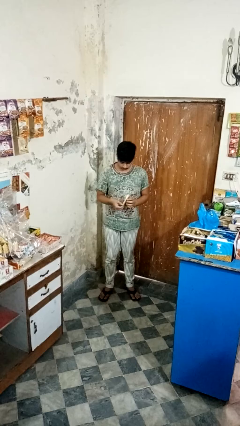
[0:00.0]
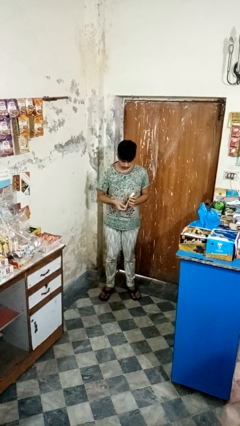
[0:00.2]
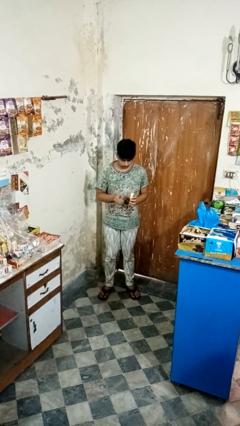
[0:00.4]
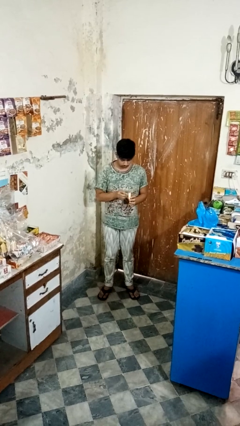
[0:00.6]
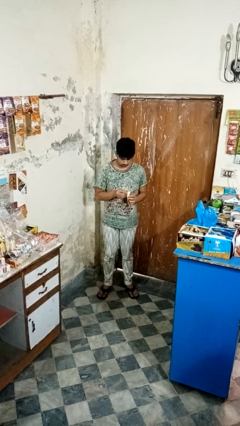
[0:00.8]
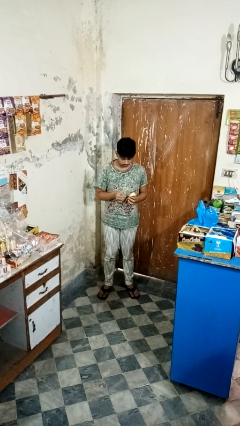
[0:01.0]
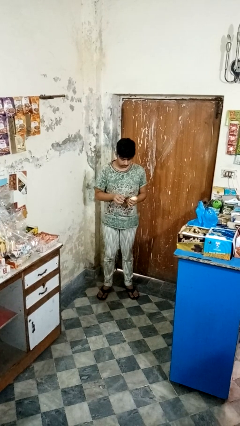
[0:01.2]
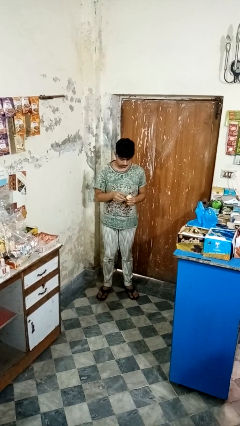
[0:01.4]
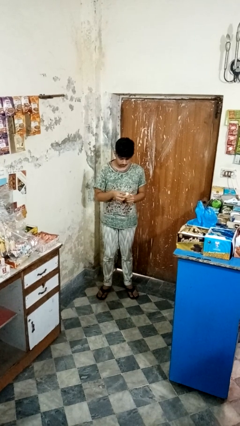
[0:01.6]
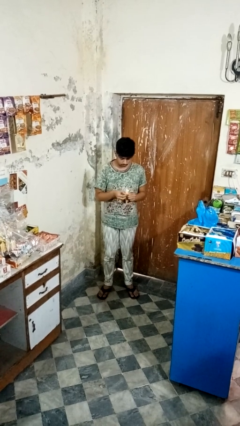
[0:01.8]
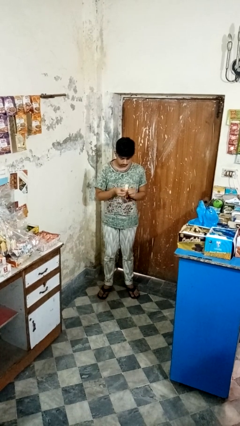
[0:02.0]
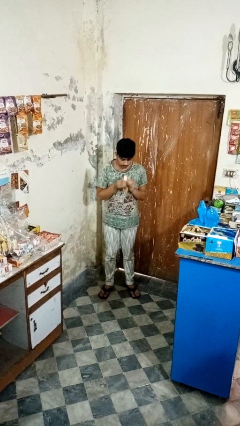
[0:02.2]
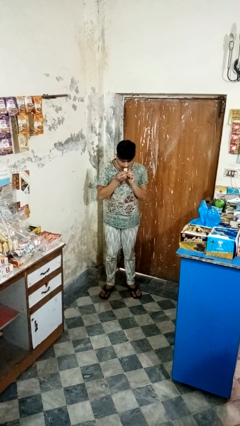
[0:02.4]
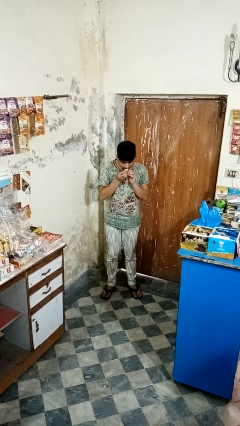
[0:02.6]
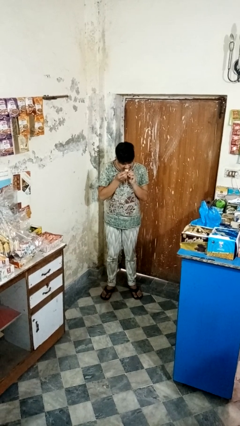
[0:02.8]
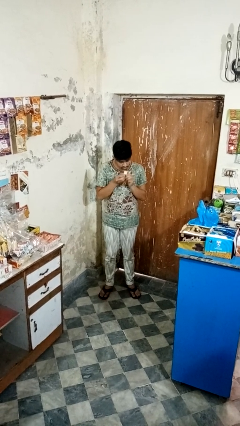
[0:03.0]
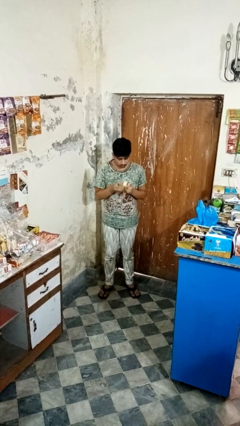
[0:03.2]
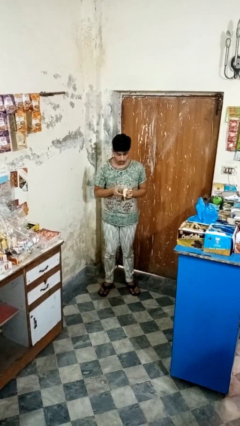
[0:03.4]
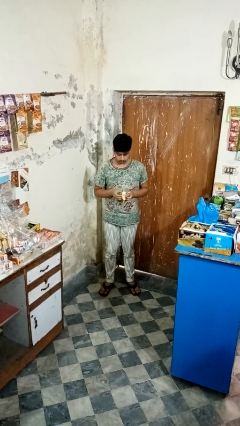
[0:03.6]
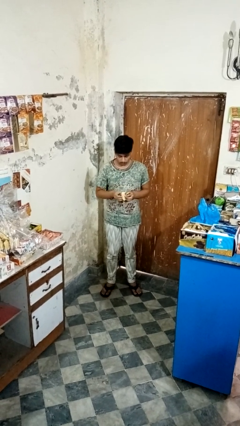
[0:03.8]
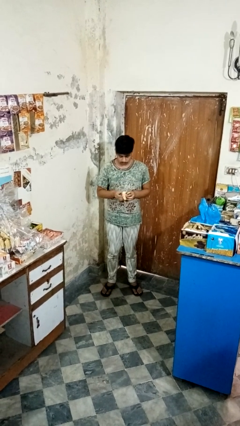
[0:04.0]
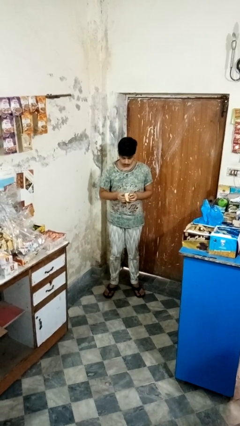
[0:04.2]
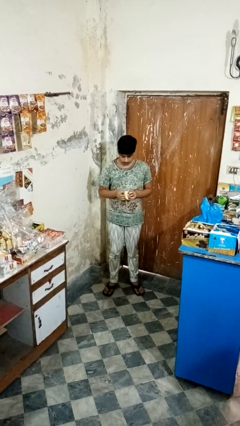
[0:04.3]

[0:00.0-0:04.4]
person eats banana

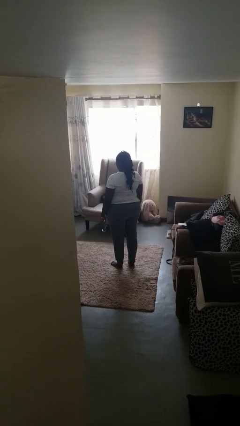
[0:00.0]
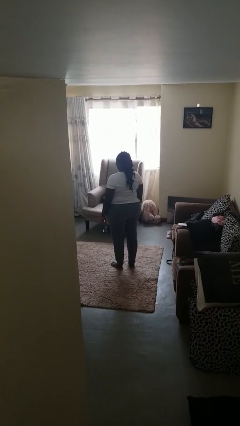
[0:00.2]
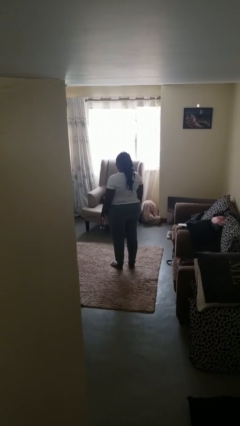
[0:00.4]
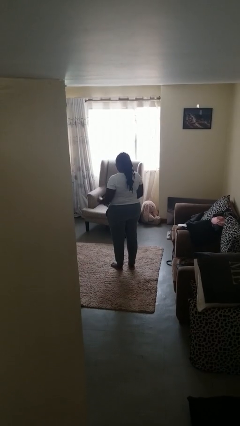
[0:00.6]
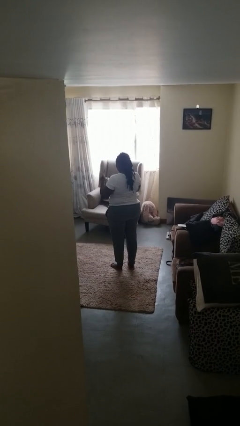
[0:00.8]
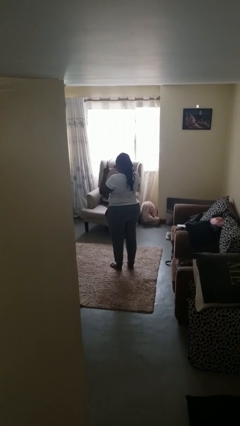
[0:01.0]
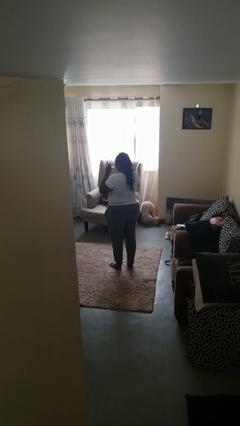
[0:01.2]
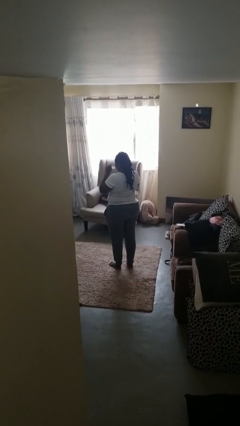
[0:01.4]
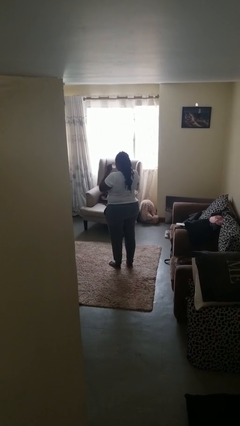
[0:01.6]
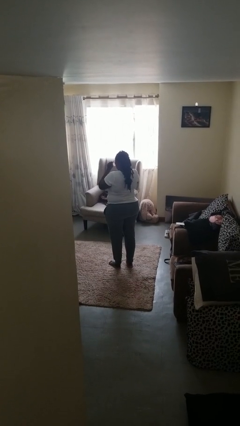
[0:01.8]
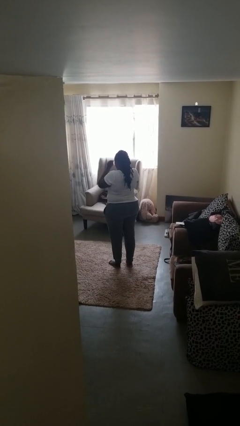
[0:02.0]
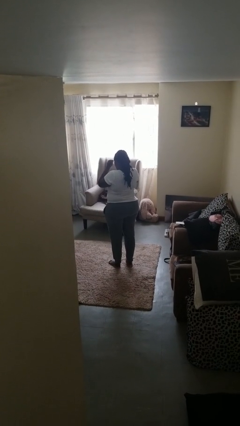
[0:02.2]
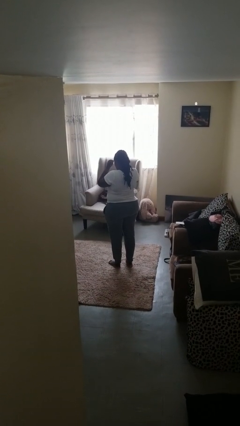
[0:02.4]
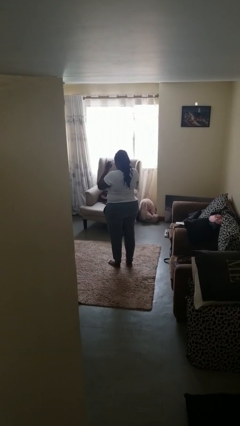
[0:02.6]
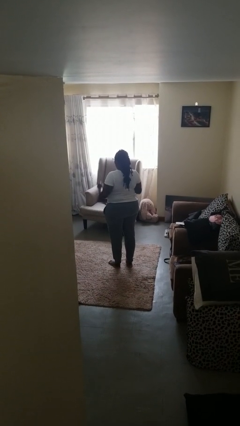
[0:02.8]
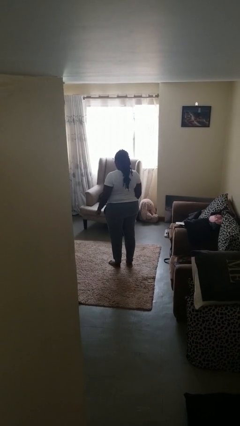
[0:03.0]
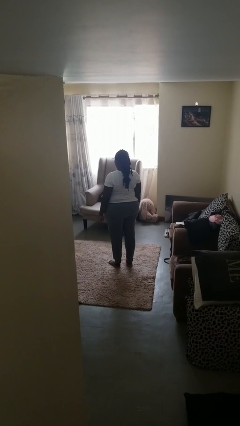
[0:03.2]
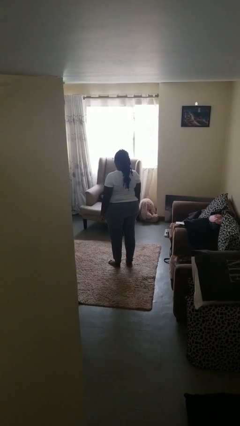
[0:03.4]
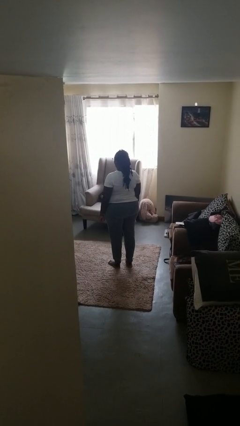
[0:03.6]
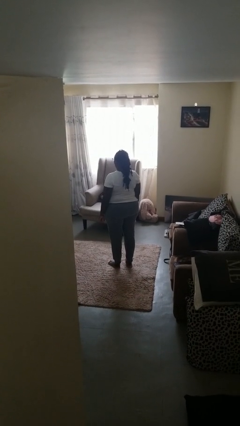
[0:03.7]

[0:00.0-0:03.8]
person puts on glasses

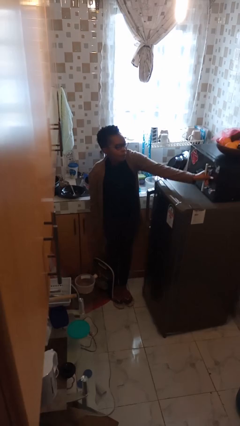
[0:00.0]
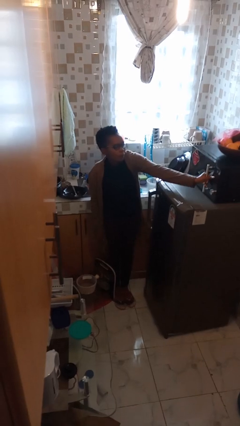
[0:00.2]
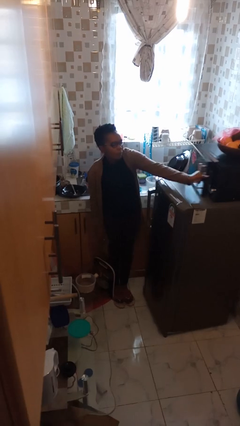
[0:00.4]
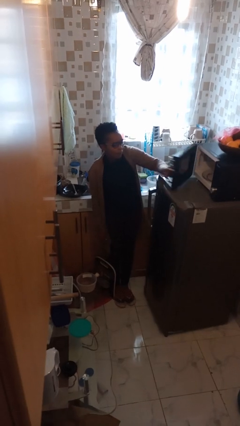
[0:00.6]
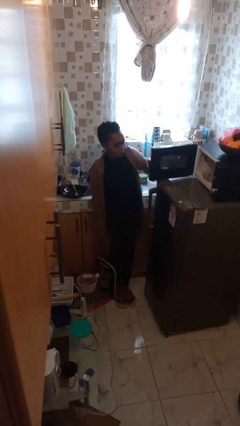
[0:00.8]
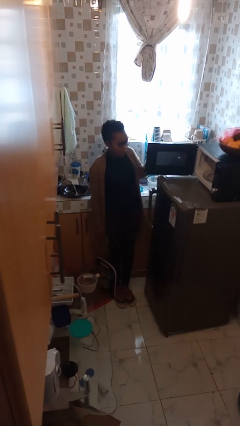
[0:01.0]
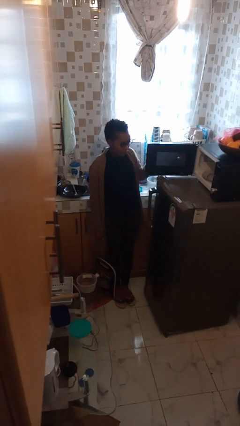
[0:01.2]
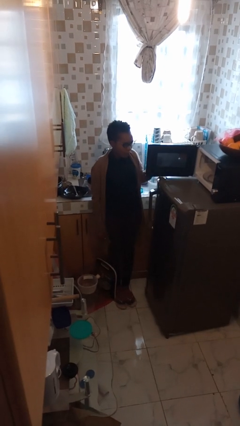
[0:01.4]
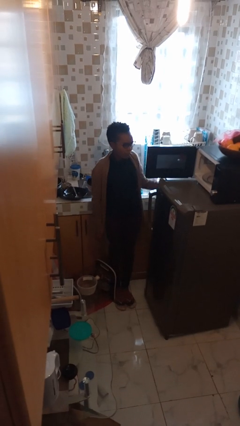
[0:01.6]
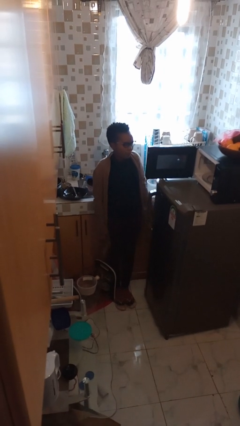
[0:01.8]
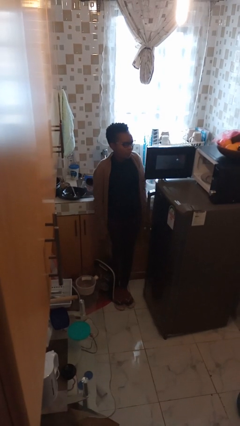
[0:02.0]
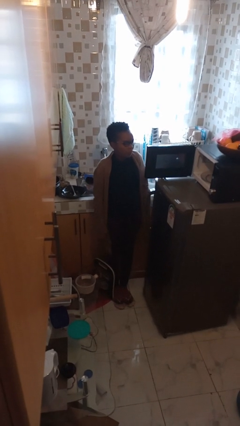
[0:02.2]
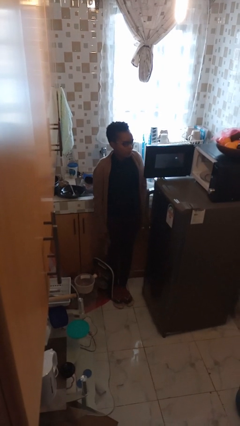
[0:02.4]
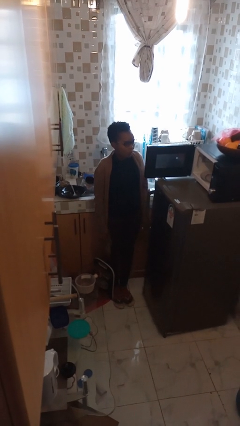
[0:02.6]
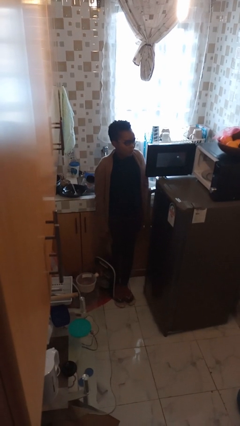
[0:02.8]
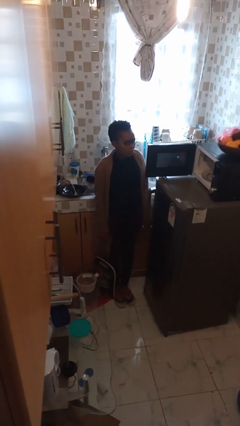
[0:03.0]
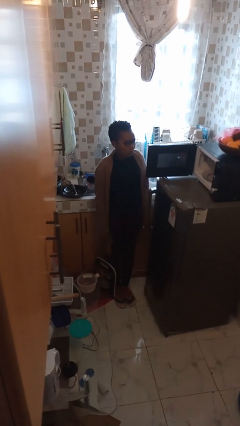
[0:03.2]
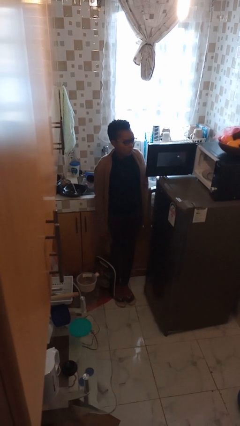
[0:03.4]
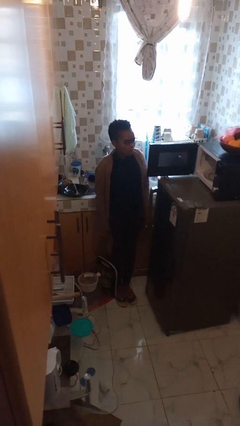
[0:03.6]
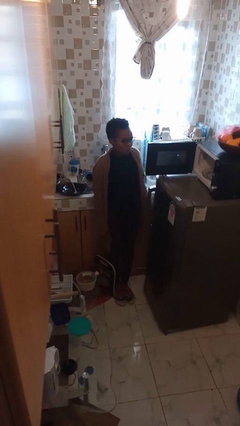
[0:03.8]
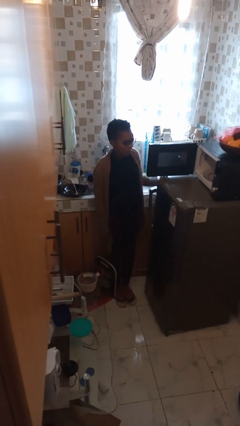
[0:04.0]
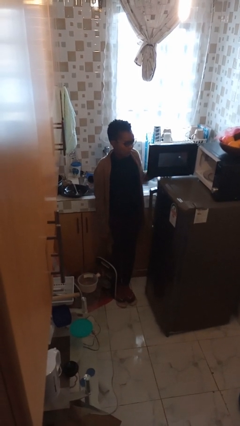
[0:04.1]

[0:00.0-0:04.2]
person opens microwave

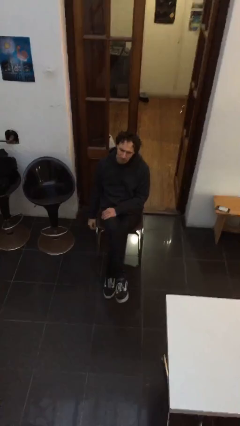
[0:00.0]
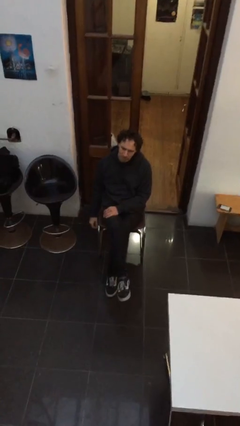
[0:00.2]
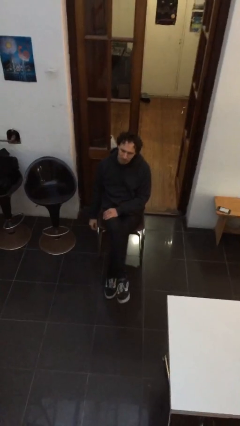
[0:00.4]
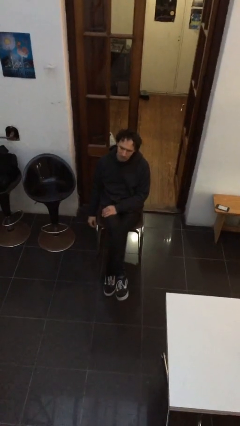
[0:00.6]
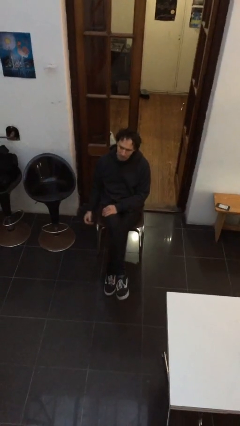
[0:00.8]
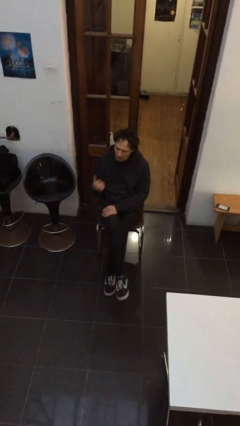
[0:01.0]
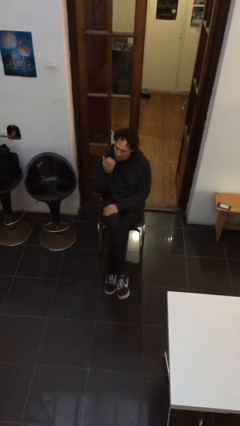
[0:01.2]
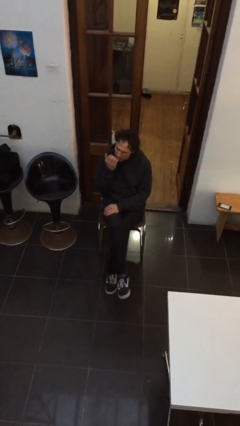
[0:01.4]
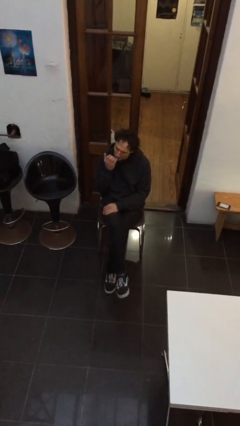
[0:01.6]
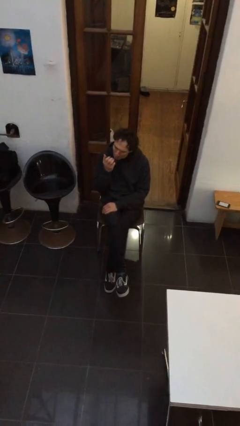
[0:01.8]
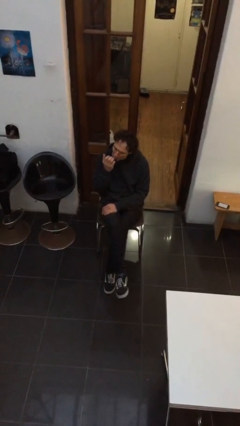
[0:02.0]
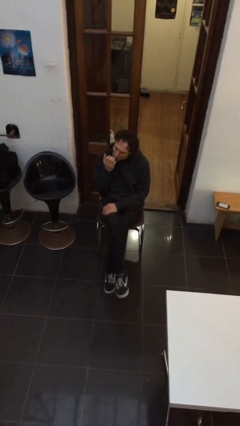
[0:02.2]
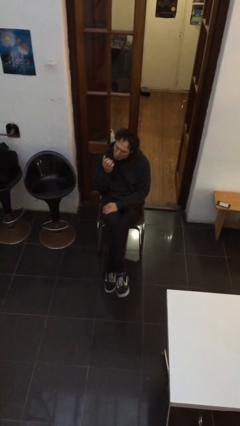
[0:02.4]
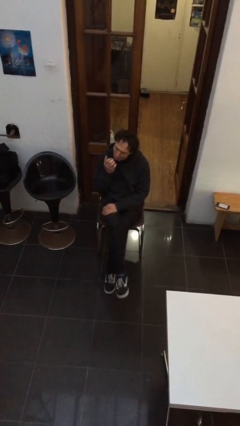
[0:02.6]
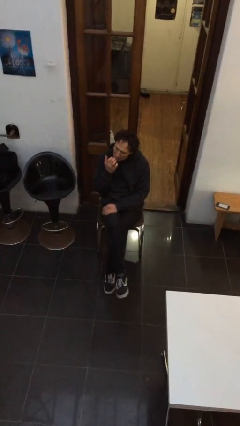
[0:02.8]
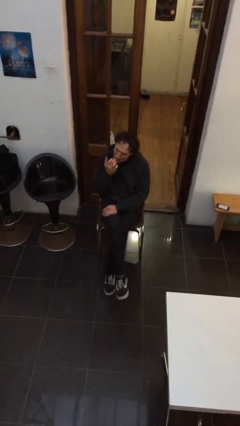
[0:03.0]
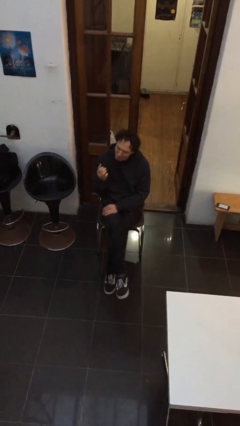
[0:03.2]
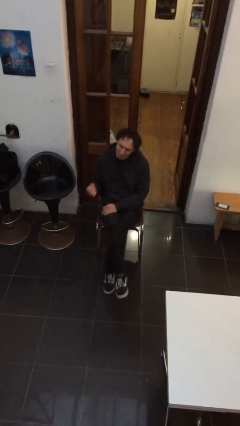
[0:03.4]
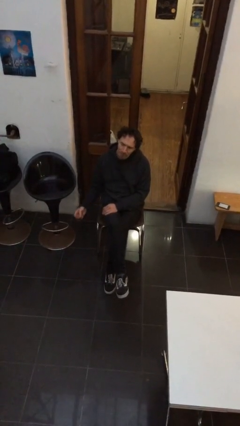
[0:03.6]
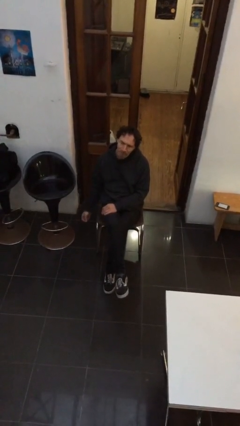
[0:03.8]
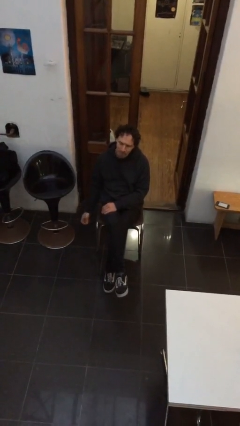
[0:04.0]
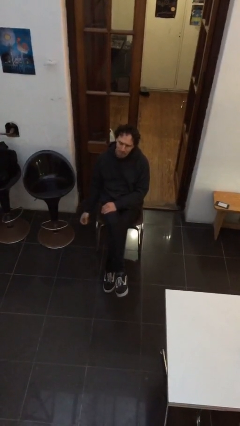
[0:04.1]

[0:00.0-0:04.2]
person licks fingers

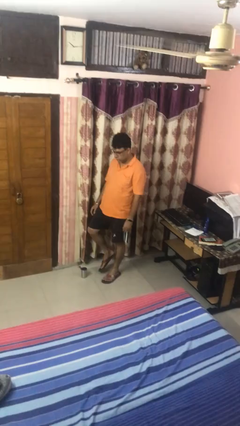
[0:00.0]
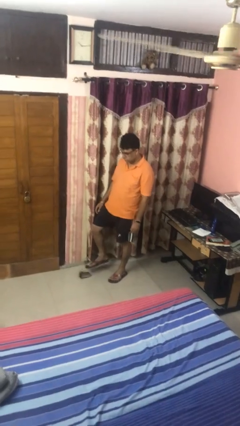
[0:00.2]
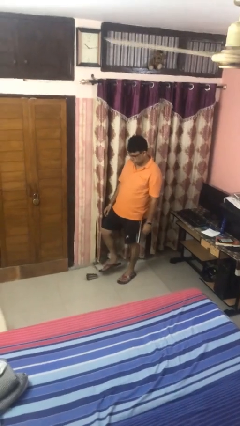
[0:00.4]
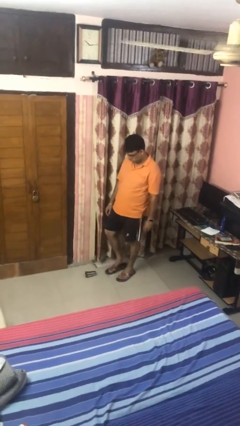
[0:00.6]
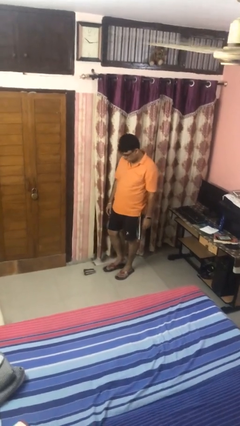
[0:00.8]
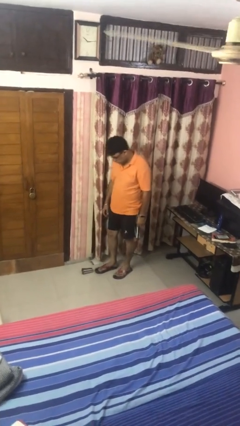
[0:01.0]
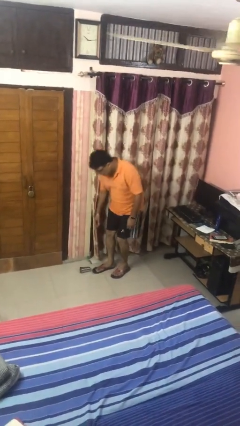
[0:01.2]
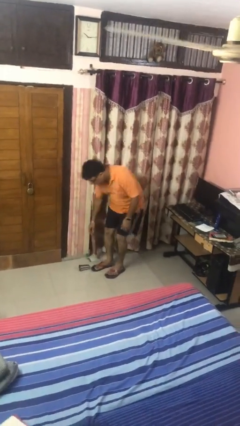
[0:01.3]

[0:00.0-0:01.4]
person spills on floor
